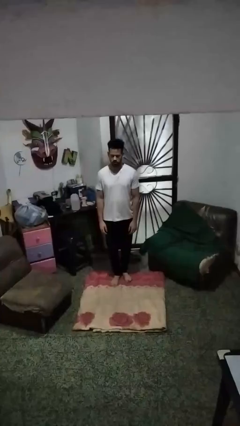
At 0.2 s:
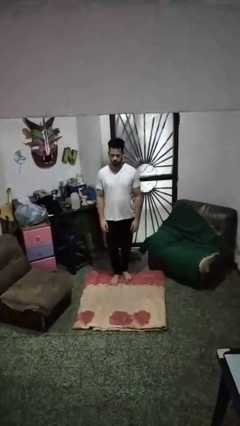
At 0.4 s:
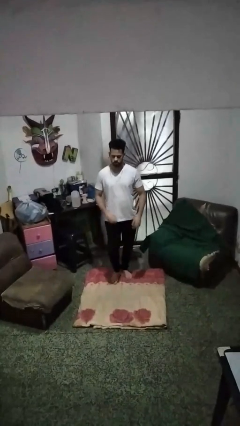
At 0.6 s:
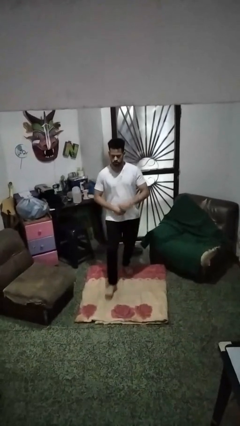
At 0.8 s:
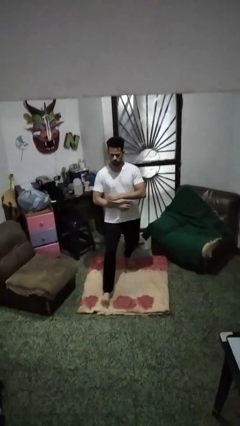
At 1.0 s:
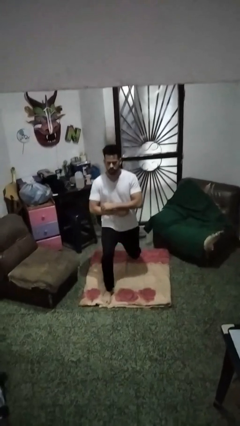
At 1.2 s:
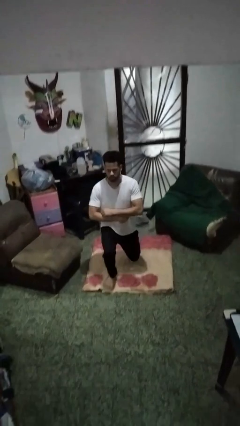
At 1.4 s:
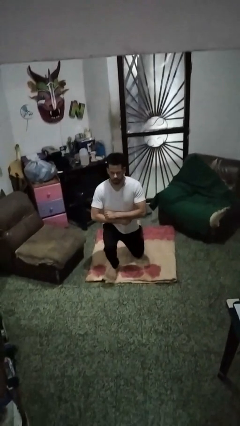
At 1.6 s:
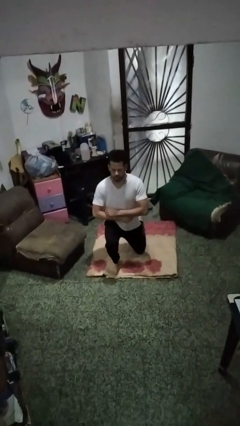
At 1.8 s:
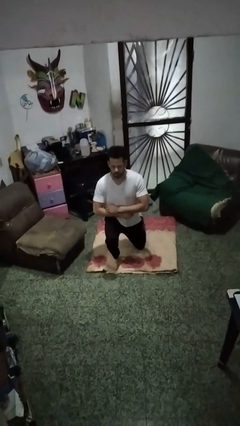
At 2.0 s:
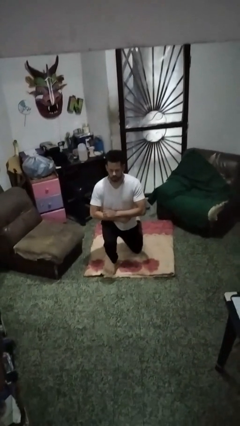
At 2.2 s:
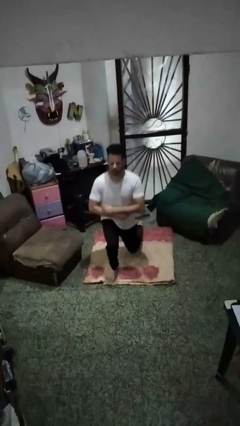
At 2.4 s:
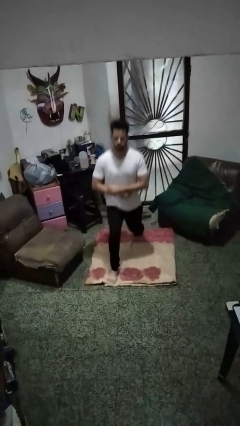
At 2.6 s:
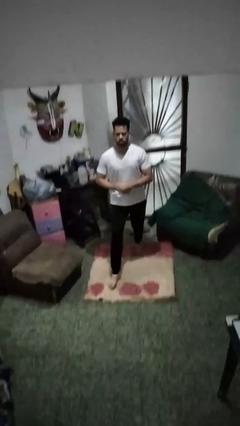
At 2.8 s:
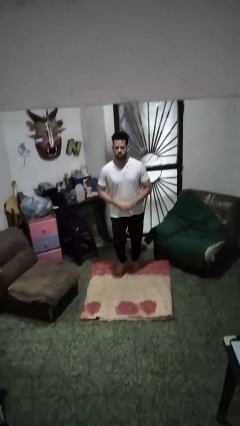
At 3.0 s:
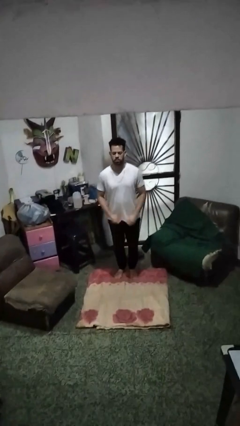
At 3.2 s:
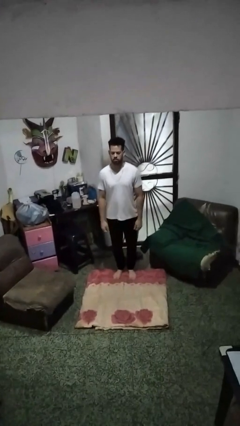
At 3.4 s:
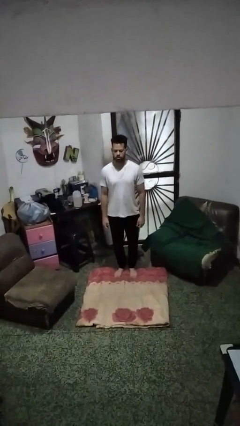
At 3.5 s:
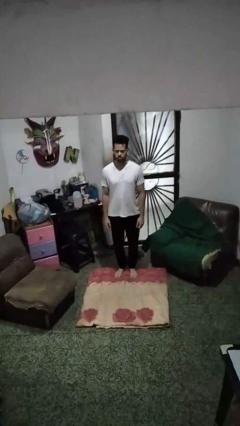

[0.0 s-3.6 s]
person exercises with lunges

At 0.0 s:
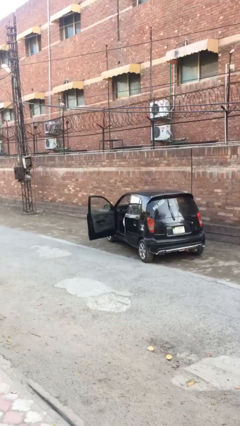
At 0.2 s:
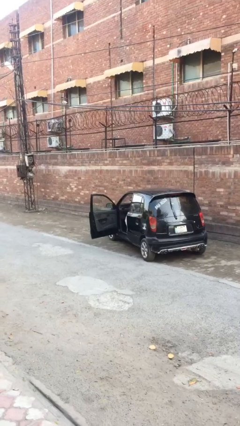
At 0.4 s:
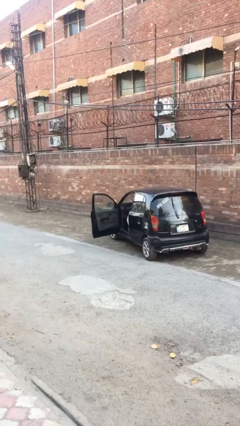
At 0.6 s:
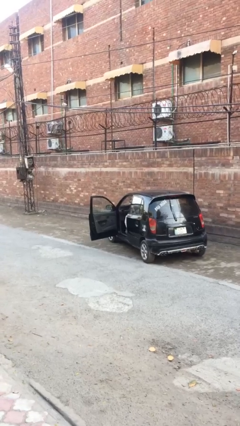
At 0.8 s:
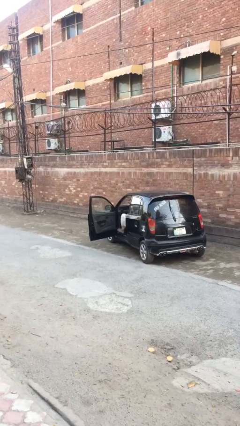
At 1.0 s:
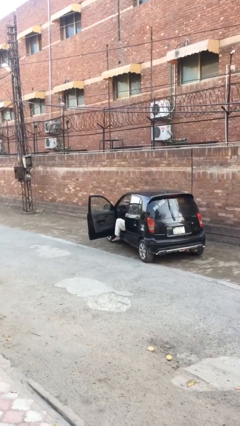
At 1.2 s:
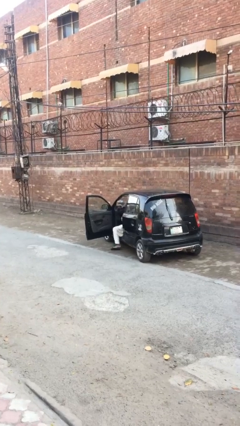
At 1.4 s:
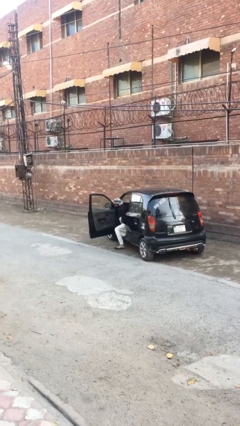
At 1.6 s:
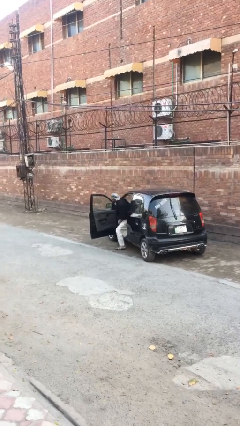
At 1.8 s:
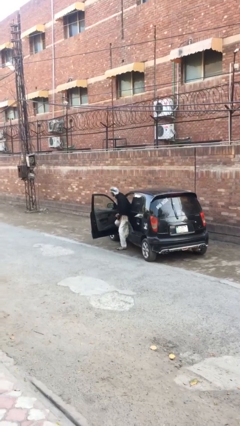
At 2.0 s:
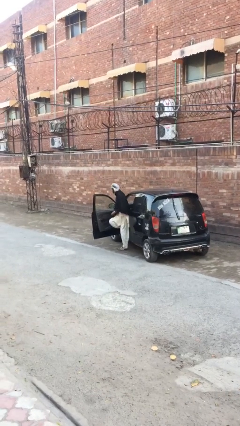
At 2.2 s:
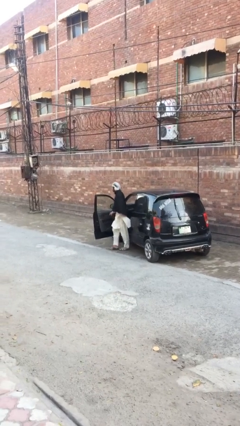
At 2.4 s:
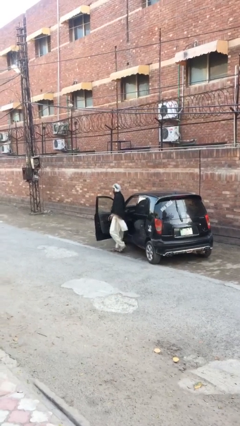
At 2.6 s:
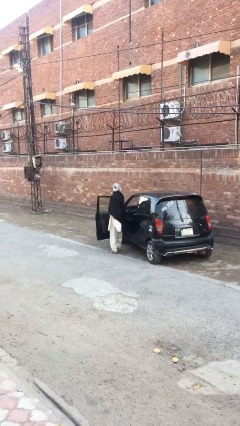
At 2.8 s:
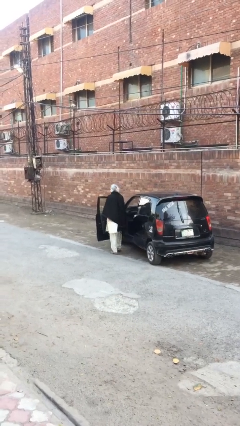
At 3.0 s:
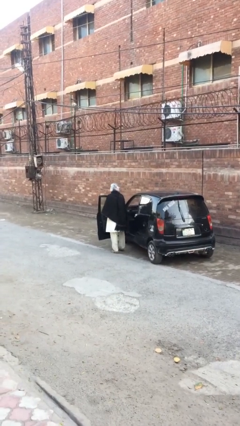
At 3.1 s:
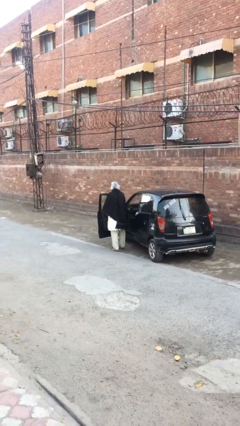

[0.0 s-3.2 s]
person exits car

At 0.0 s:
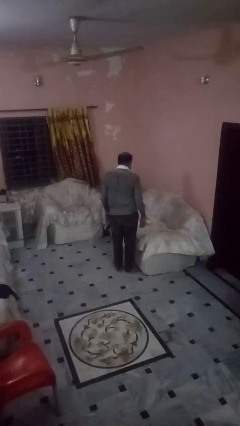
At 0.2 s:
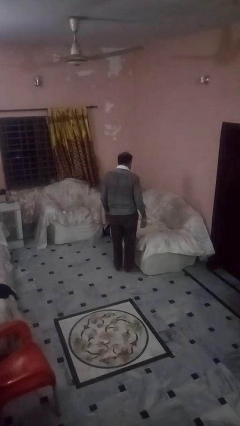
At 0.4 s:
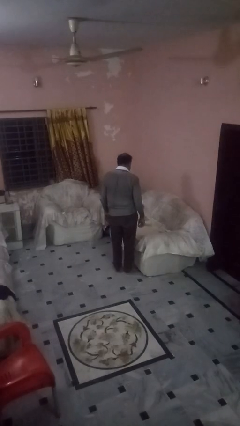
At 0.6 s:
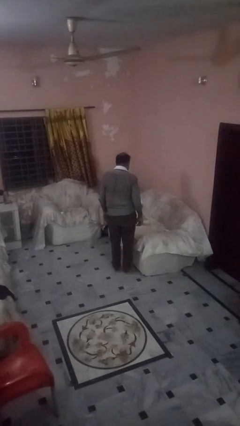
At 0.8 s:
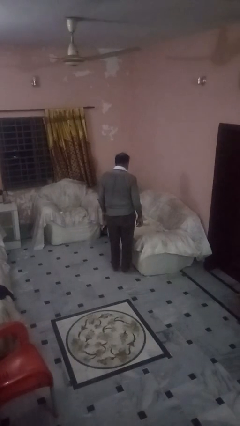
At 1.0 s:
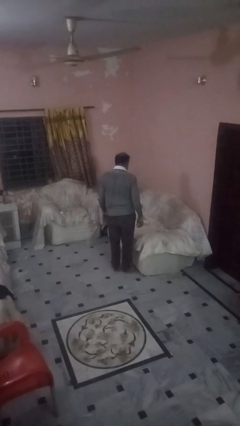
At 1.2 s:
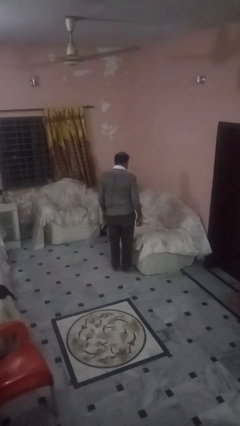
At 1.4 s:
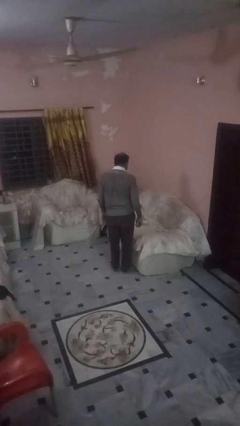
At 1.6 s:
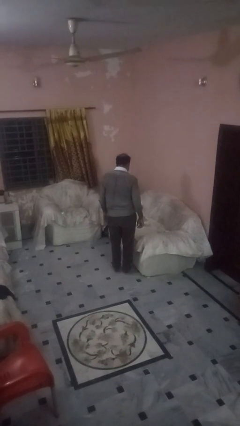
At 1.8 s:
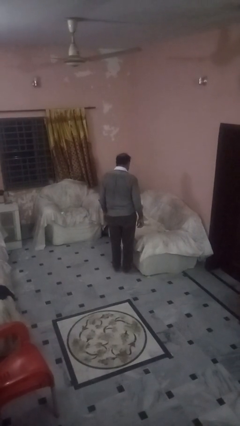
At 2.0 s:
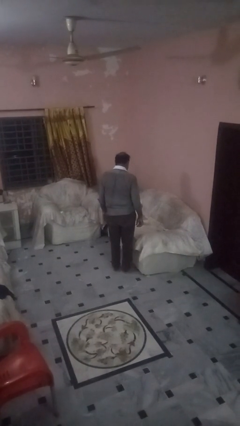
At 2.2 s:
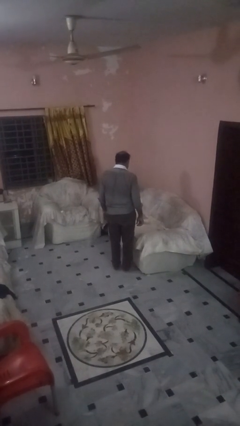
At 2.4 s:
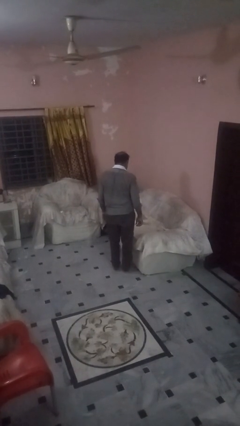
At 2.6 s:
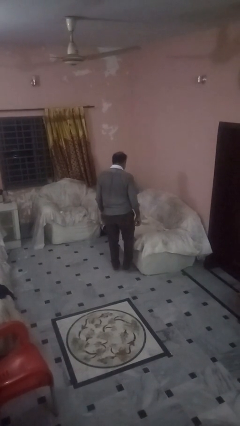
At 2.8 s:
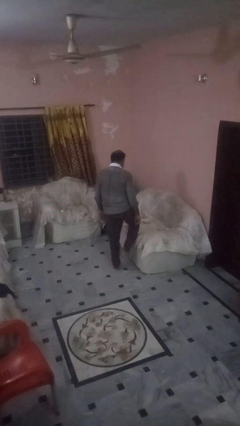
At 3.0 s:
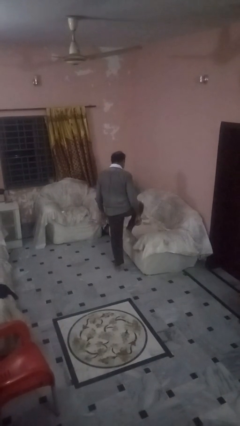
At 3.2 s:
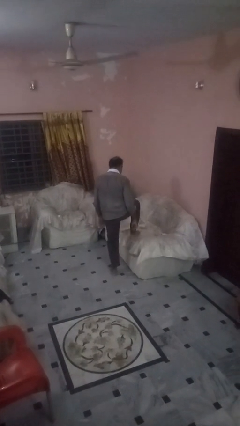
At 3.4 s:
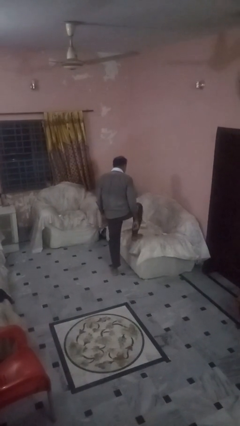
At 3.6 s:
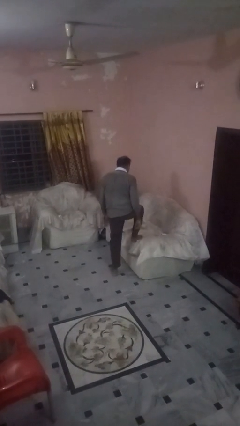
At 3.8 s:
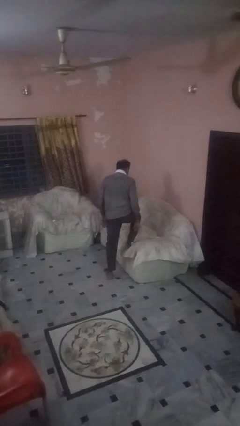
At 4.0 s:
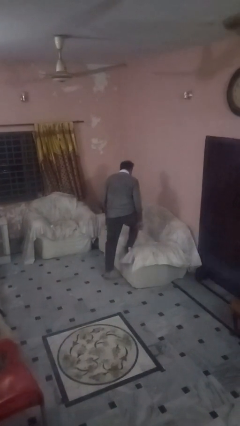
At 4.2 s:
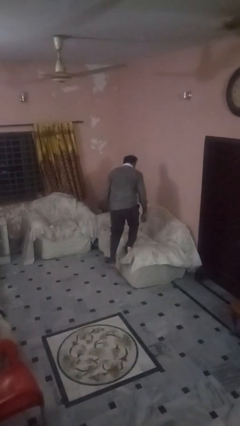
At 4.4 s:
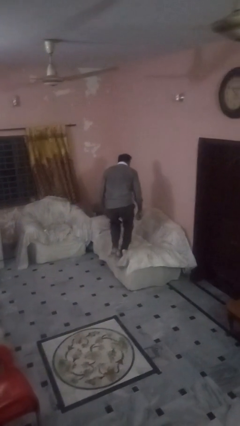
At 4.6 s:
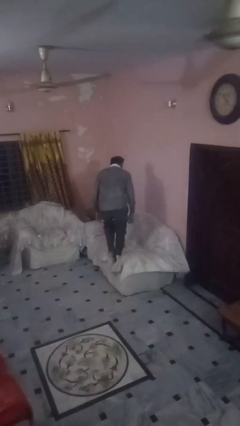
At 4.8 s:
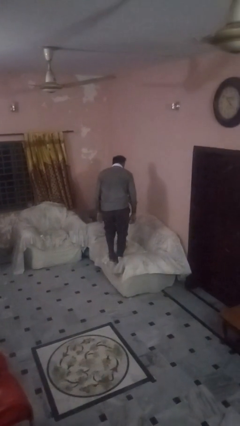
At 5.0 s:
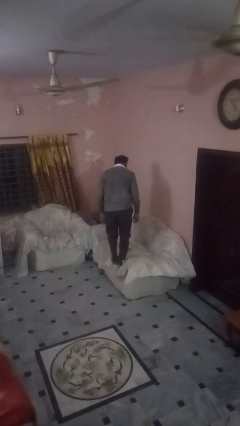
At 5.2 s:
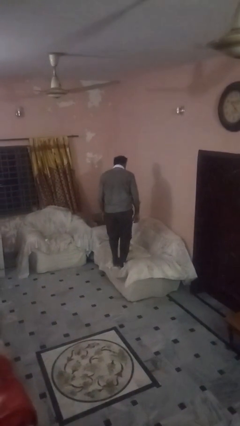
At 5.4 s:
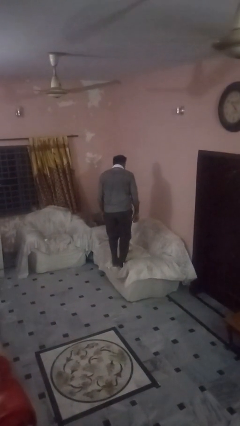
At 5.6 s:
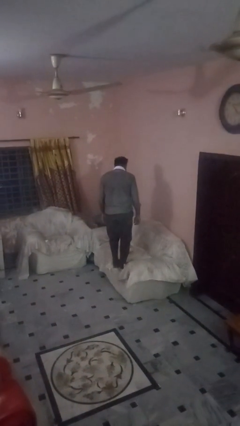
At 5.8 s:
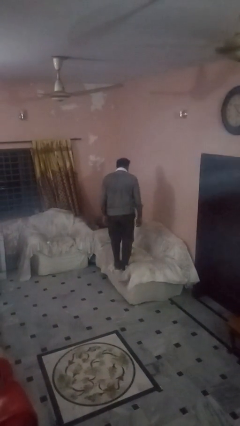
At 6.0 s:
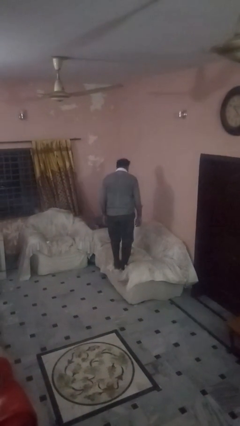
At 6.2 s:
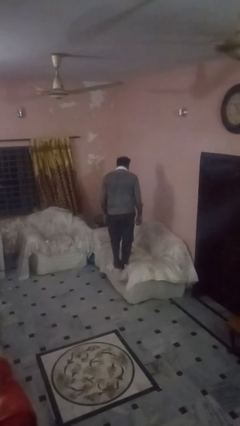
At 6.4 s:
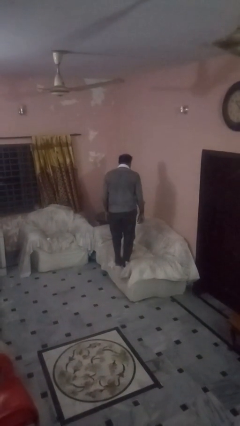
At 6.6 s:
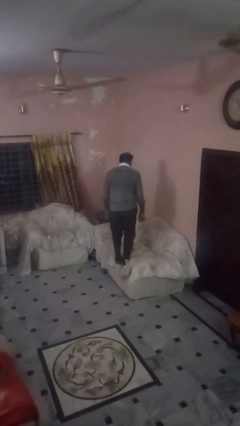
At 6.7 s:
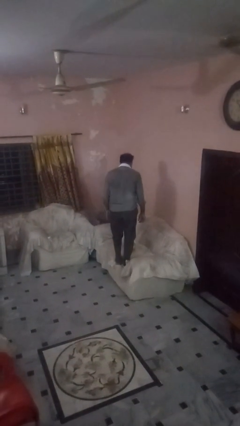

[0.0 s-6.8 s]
person climbs on couch

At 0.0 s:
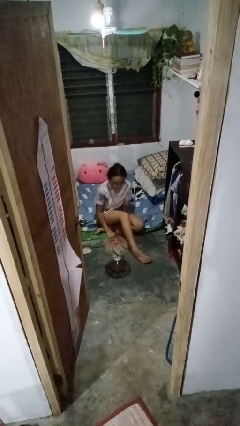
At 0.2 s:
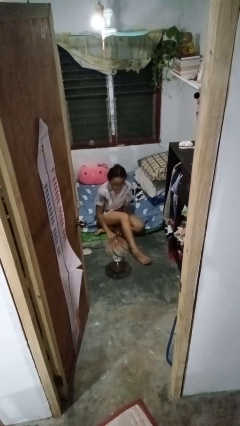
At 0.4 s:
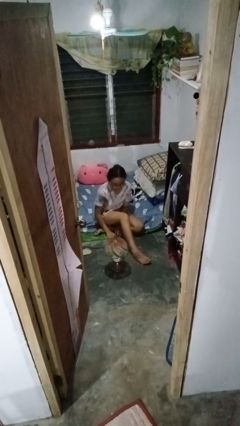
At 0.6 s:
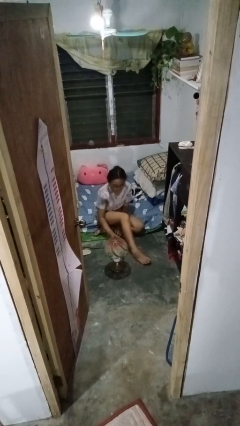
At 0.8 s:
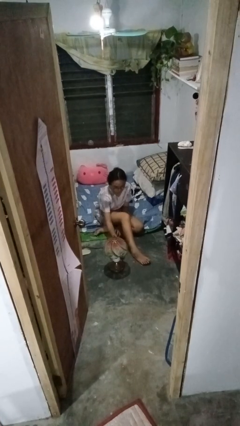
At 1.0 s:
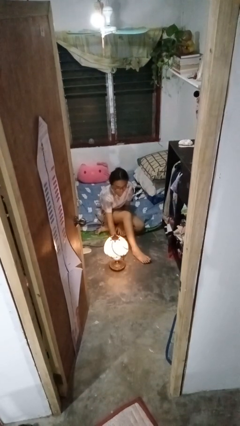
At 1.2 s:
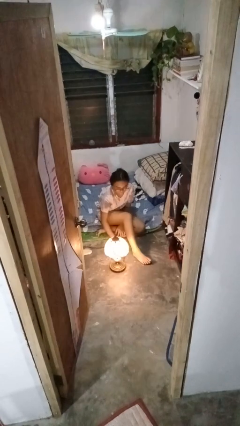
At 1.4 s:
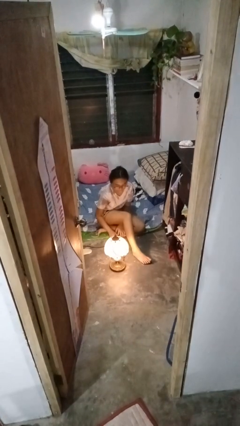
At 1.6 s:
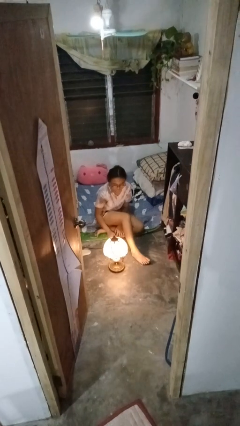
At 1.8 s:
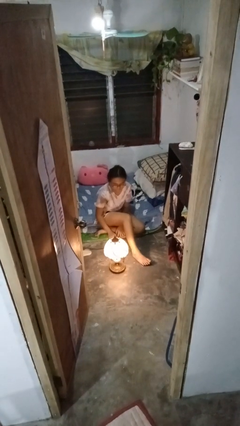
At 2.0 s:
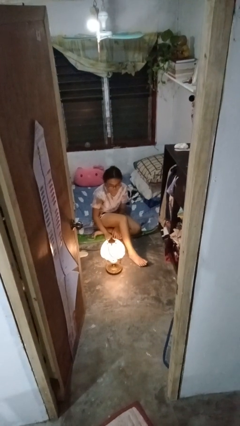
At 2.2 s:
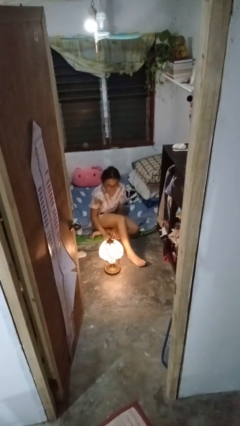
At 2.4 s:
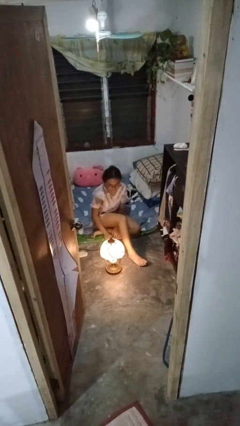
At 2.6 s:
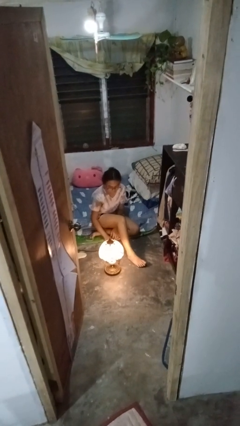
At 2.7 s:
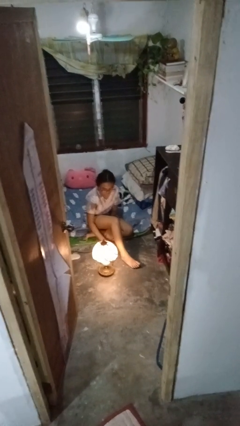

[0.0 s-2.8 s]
person turns on lamp

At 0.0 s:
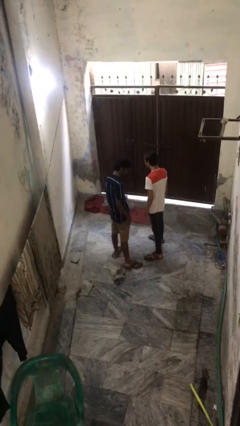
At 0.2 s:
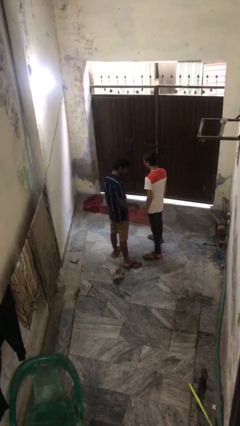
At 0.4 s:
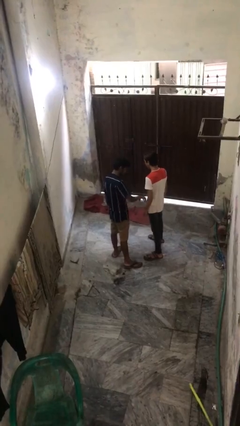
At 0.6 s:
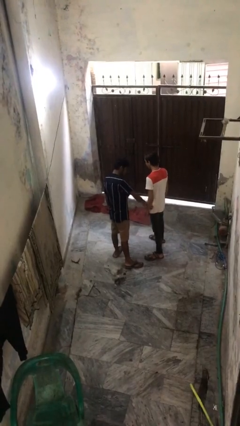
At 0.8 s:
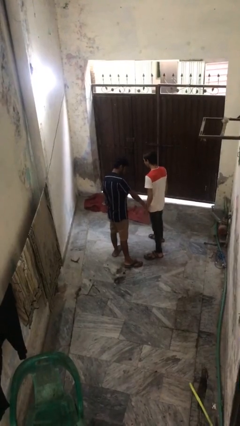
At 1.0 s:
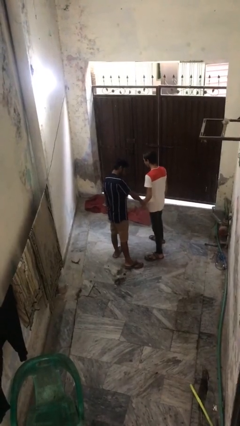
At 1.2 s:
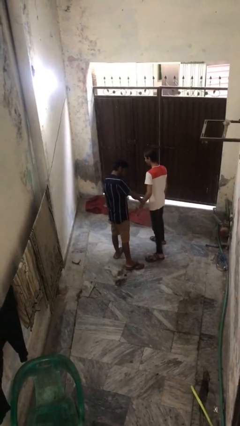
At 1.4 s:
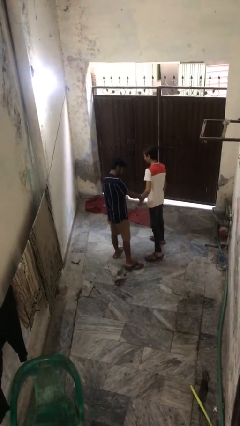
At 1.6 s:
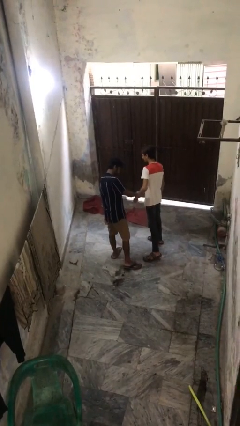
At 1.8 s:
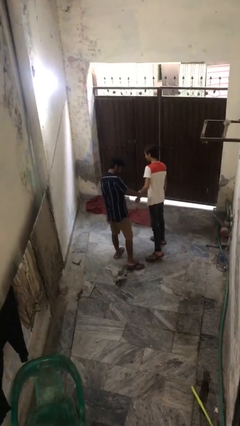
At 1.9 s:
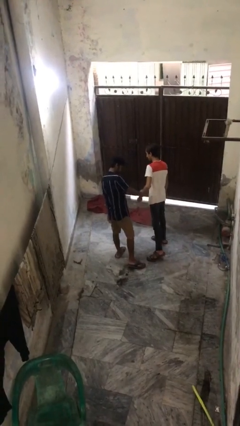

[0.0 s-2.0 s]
person grabs person by forearm
